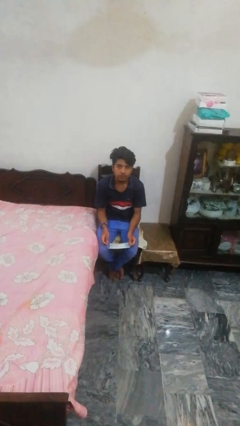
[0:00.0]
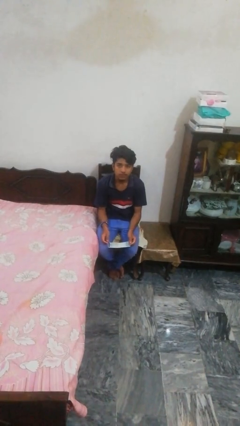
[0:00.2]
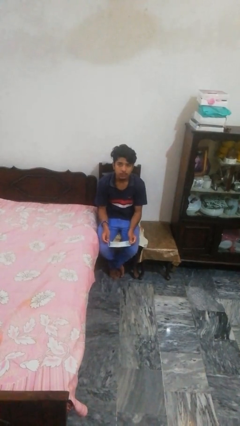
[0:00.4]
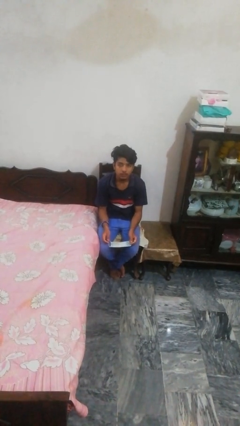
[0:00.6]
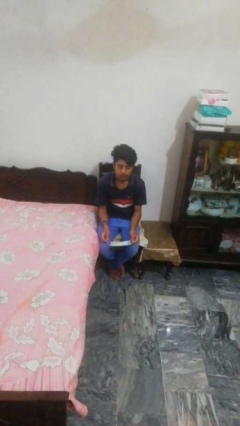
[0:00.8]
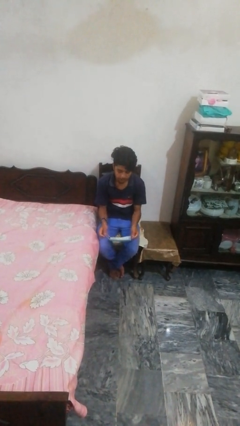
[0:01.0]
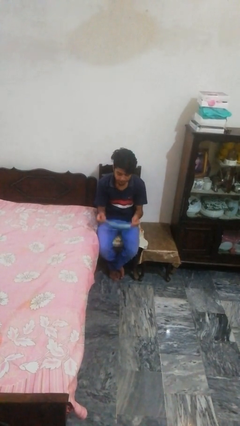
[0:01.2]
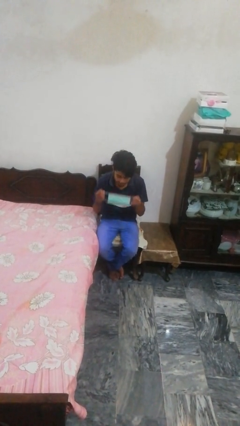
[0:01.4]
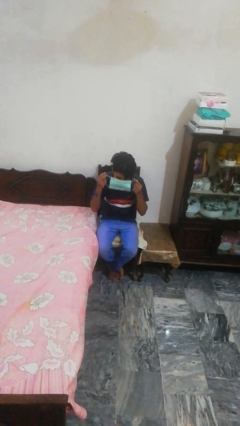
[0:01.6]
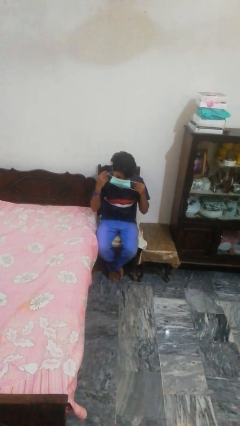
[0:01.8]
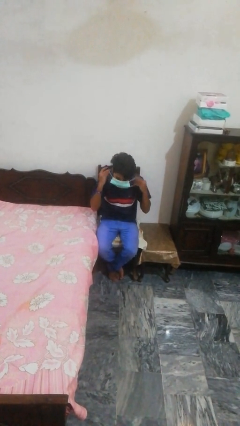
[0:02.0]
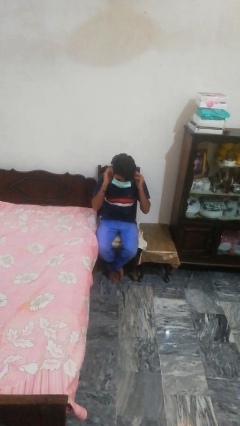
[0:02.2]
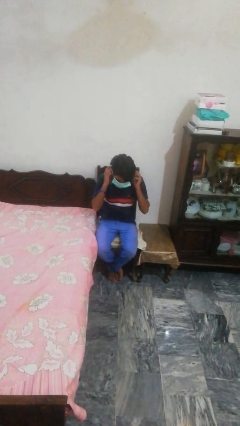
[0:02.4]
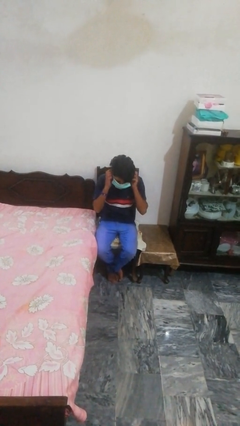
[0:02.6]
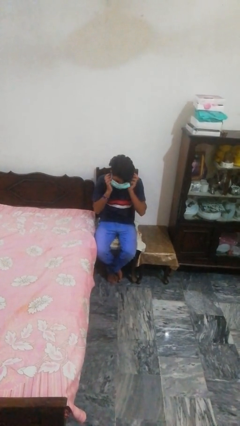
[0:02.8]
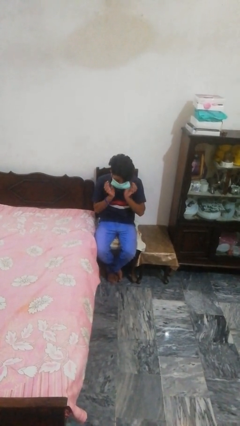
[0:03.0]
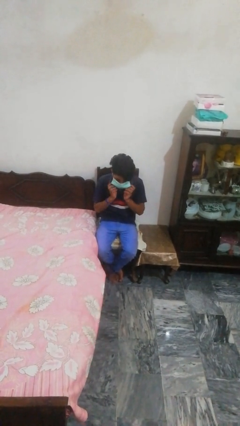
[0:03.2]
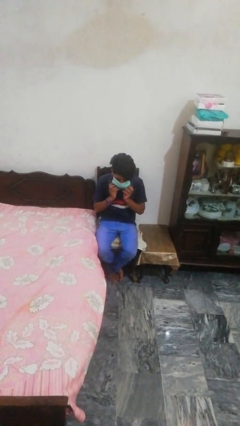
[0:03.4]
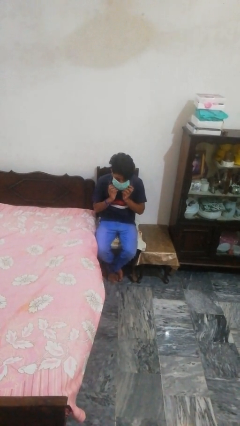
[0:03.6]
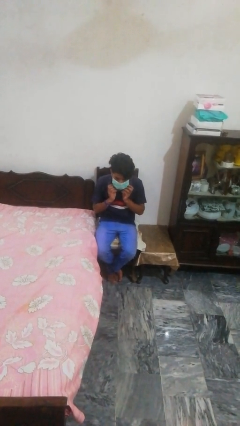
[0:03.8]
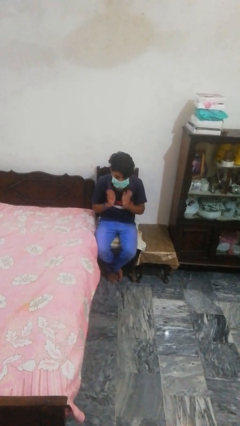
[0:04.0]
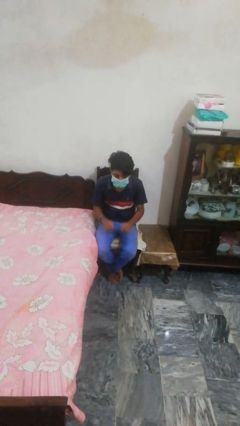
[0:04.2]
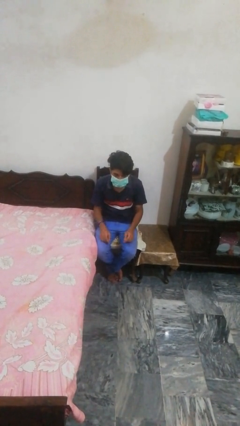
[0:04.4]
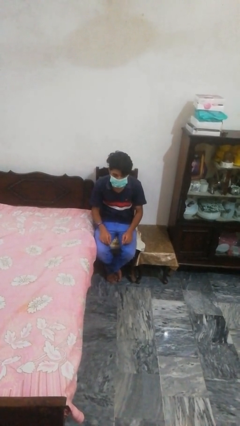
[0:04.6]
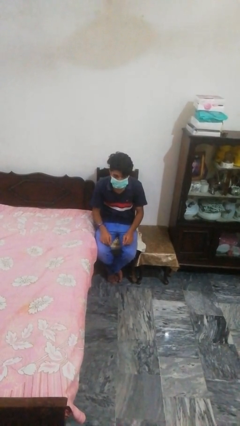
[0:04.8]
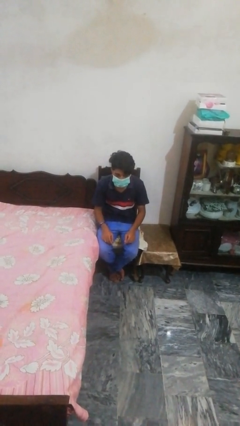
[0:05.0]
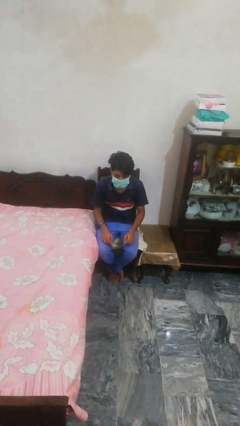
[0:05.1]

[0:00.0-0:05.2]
person puts on facemask

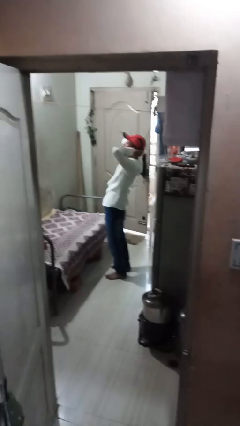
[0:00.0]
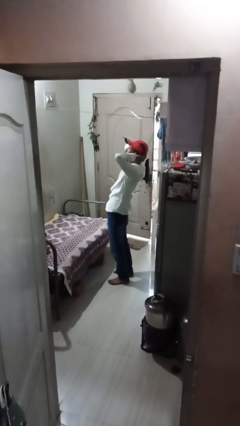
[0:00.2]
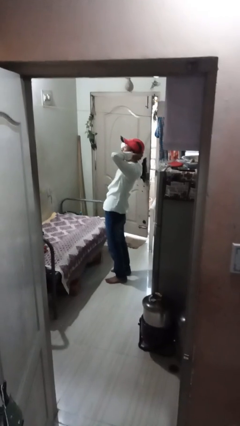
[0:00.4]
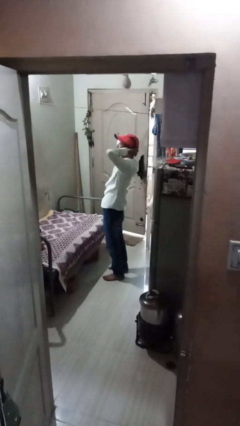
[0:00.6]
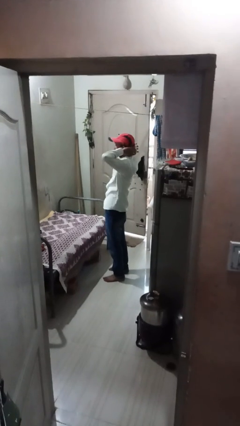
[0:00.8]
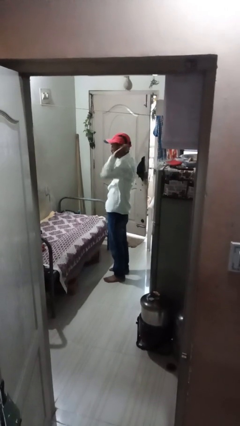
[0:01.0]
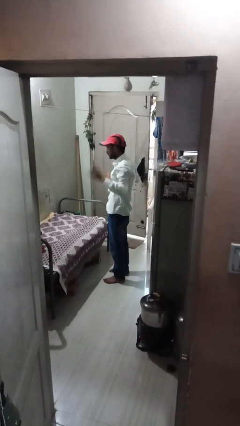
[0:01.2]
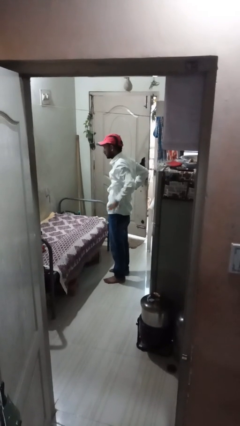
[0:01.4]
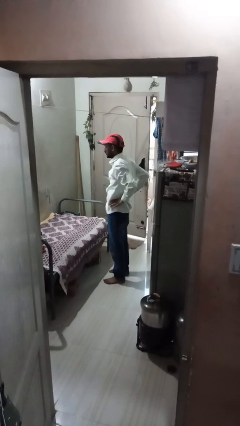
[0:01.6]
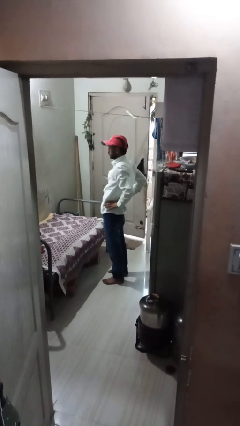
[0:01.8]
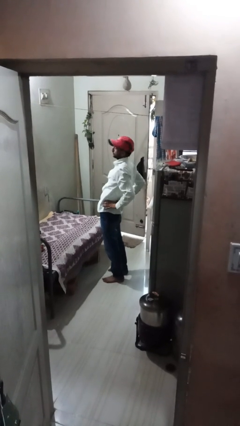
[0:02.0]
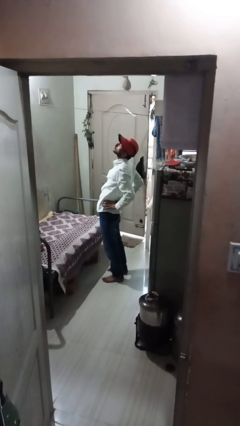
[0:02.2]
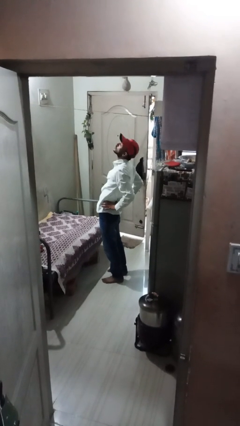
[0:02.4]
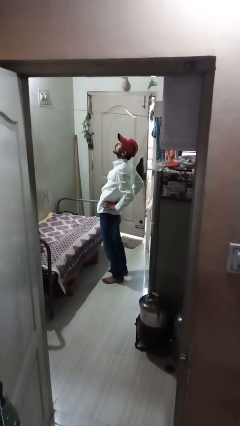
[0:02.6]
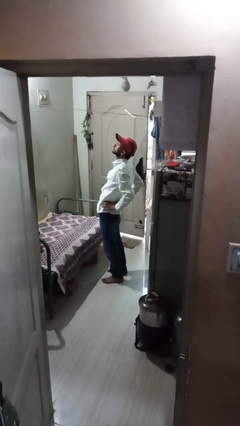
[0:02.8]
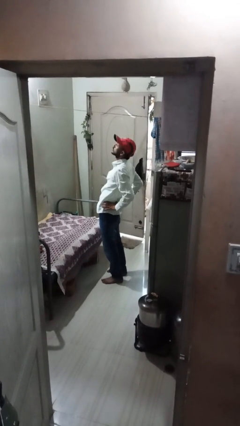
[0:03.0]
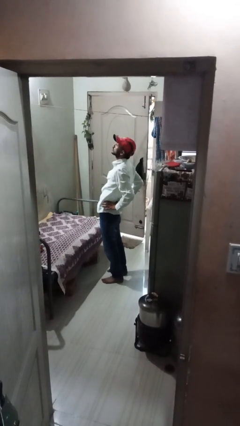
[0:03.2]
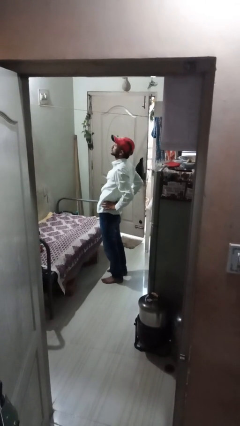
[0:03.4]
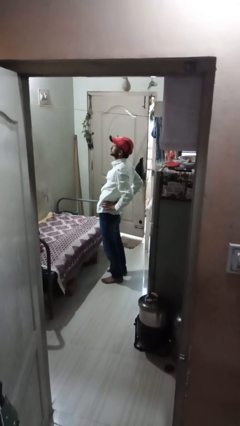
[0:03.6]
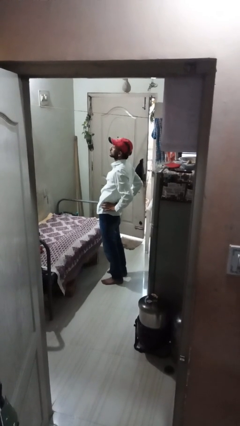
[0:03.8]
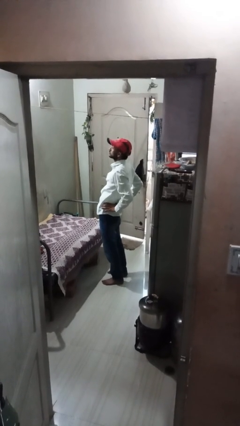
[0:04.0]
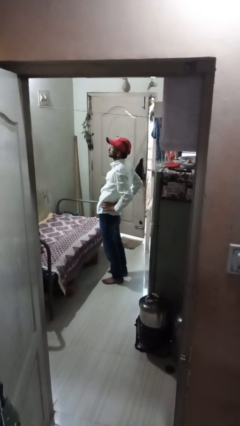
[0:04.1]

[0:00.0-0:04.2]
person stretches back

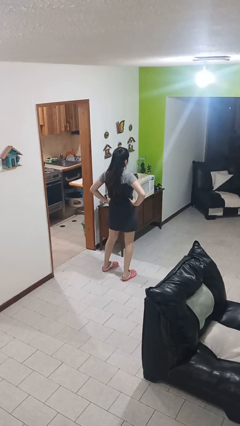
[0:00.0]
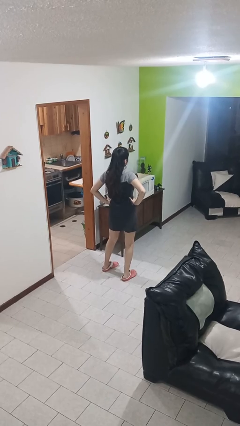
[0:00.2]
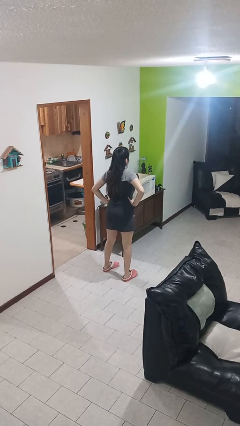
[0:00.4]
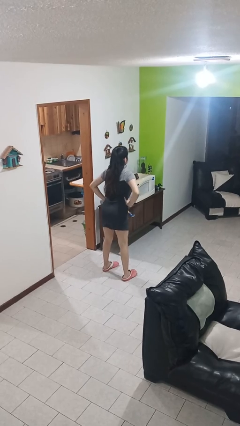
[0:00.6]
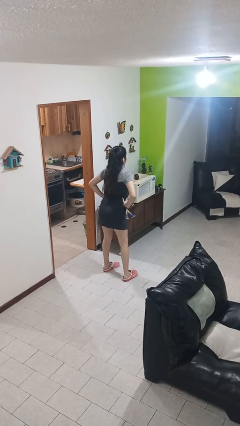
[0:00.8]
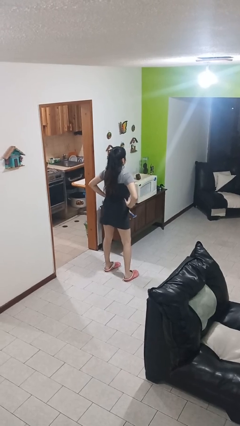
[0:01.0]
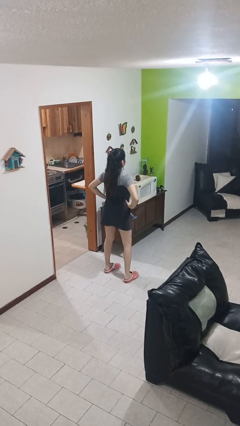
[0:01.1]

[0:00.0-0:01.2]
person wiggles hips

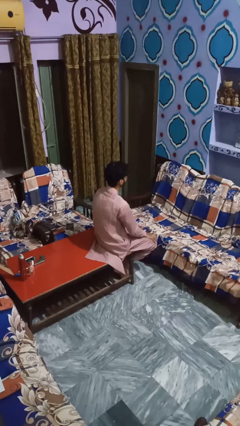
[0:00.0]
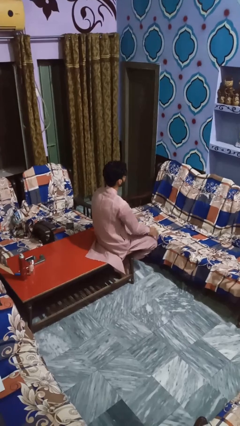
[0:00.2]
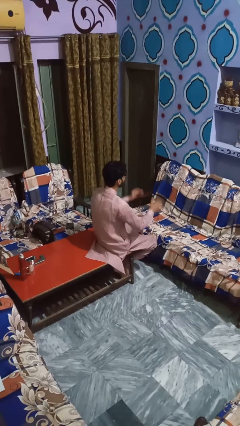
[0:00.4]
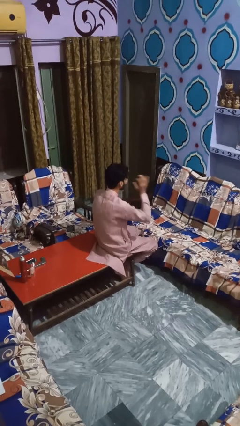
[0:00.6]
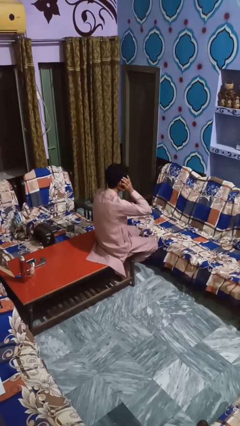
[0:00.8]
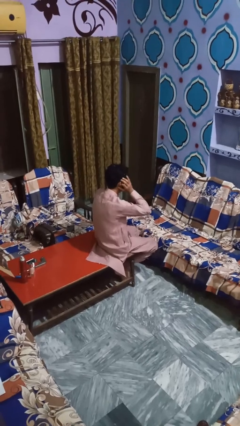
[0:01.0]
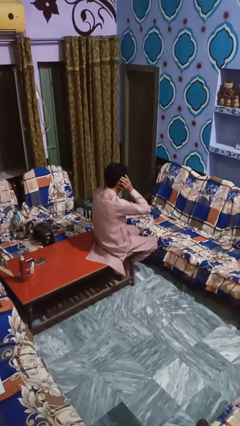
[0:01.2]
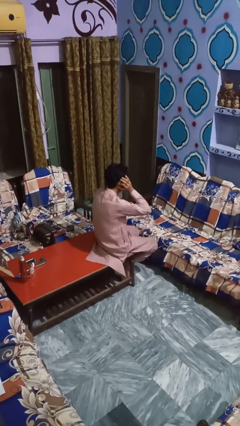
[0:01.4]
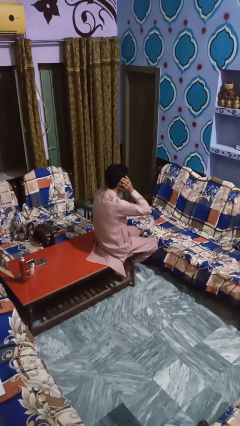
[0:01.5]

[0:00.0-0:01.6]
person puts fingers in ear

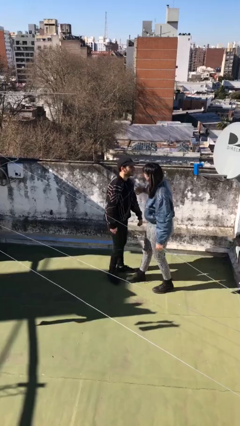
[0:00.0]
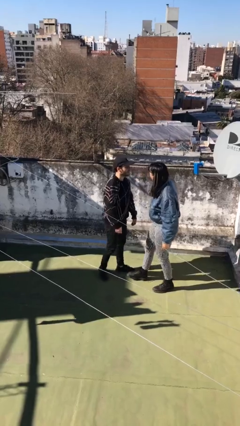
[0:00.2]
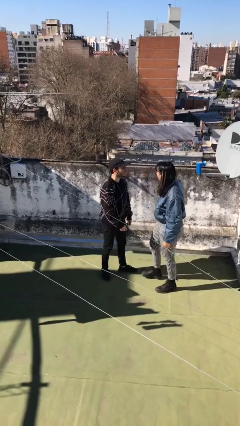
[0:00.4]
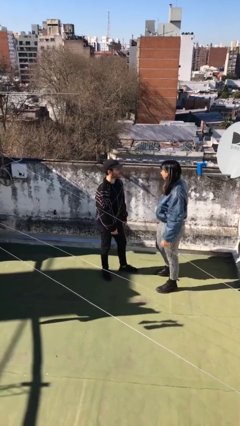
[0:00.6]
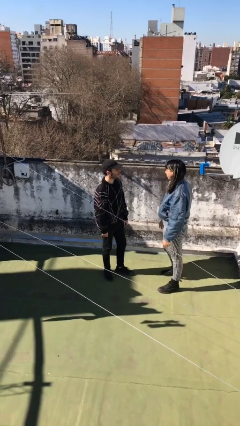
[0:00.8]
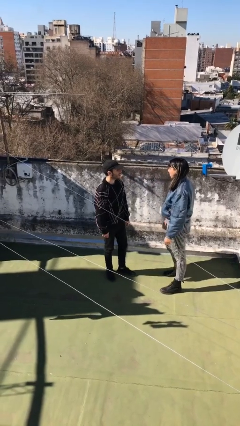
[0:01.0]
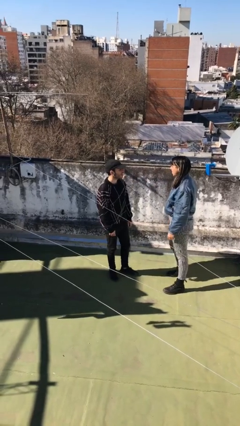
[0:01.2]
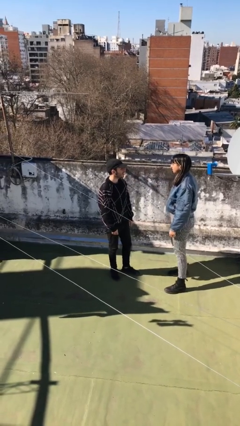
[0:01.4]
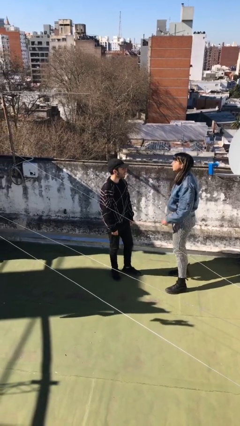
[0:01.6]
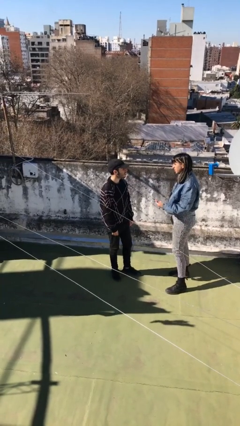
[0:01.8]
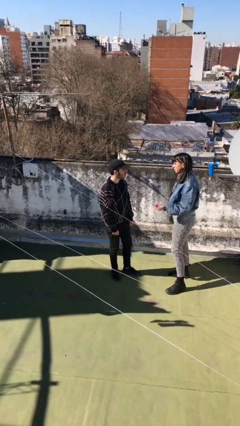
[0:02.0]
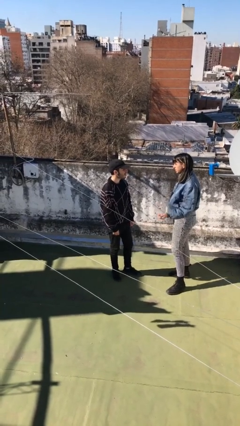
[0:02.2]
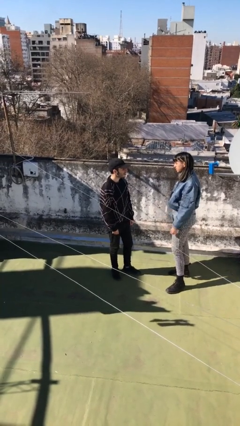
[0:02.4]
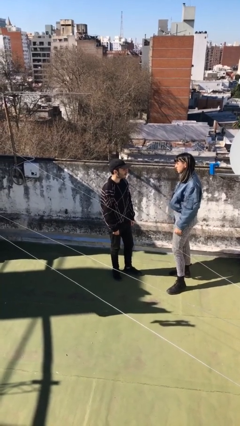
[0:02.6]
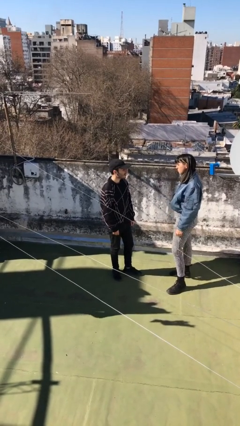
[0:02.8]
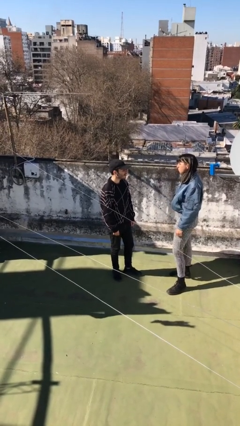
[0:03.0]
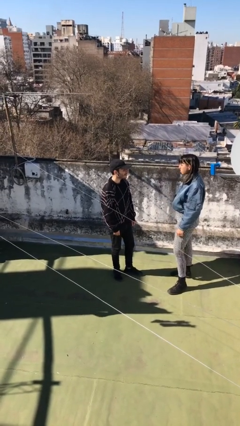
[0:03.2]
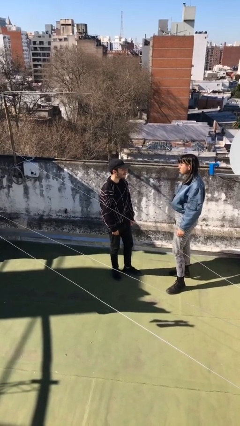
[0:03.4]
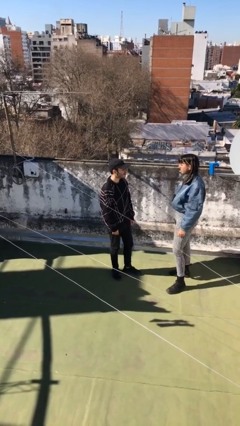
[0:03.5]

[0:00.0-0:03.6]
person talks to person

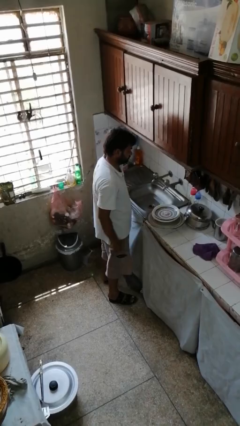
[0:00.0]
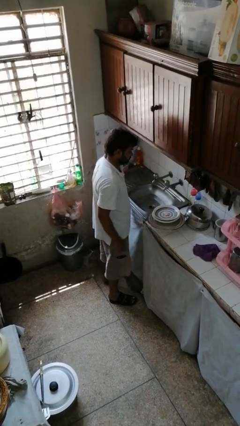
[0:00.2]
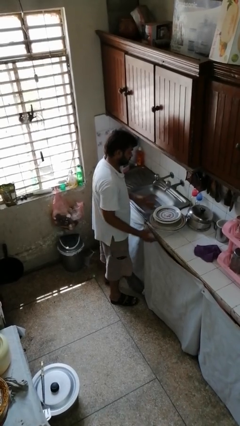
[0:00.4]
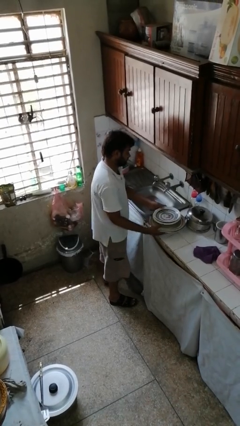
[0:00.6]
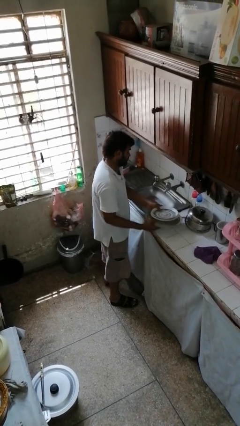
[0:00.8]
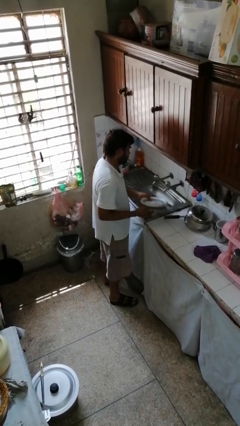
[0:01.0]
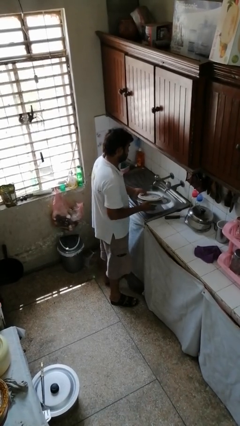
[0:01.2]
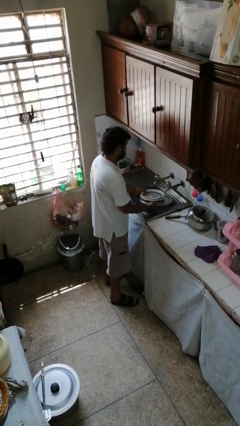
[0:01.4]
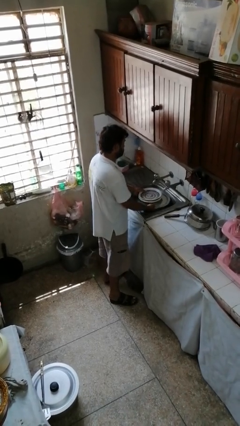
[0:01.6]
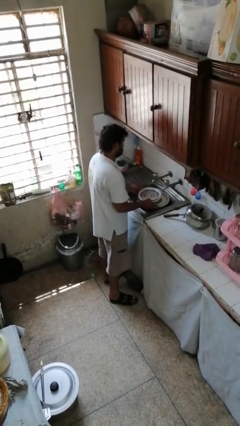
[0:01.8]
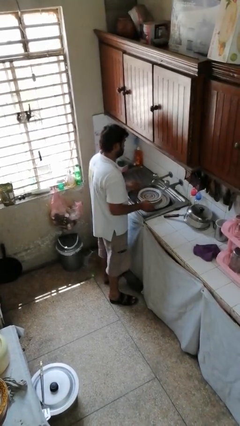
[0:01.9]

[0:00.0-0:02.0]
person loads dishwasher
